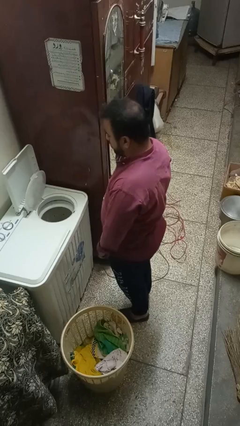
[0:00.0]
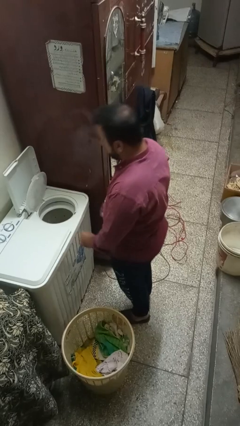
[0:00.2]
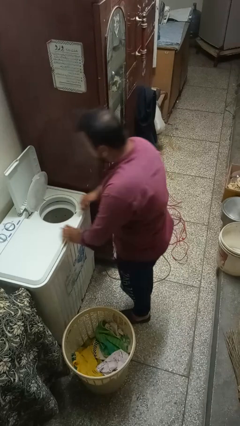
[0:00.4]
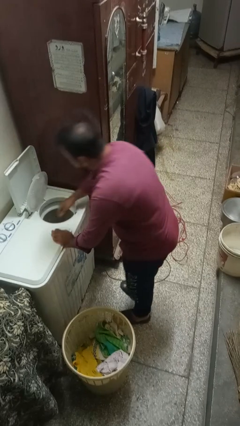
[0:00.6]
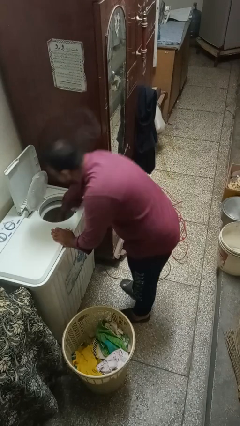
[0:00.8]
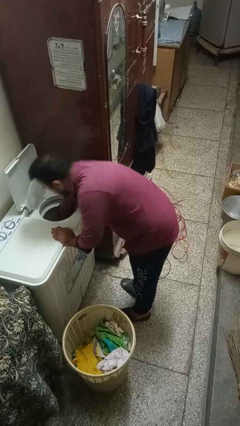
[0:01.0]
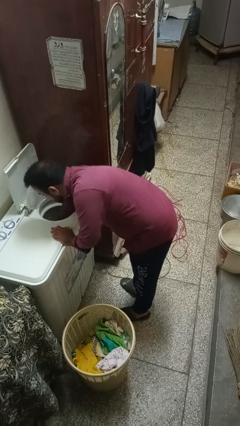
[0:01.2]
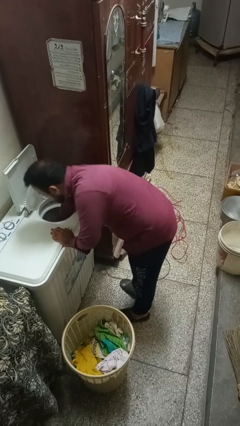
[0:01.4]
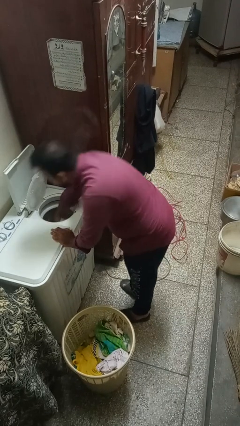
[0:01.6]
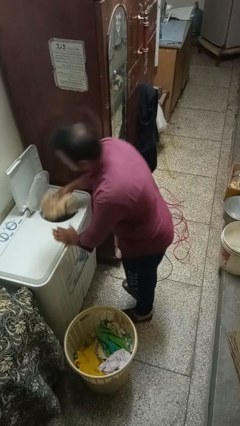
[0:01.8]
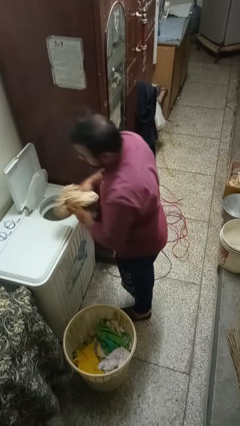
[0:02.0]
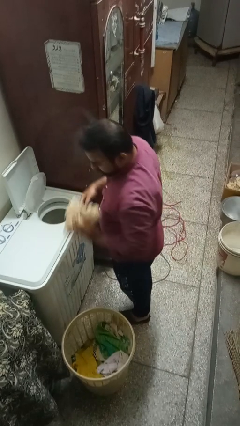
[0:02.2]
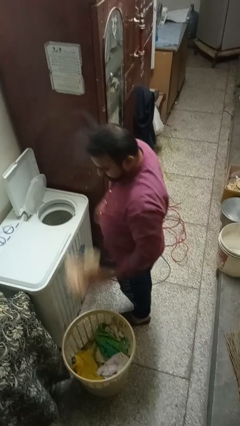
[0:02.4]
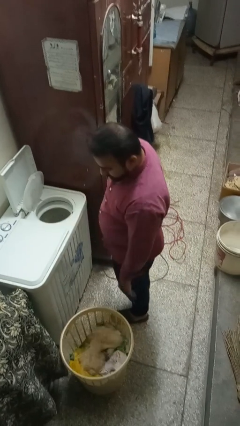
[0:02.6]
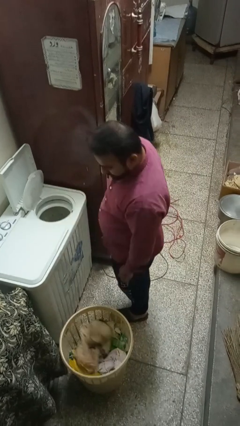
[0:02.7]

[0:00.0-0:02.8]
person unloads dryer

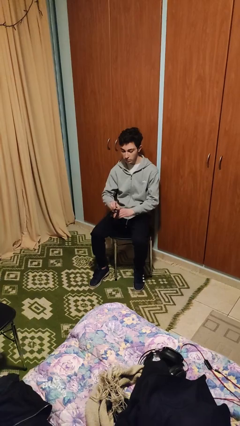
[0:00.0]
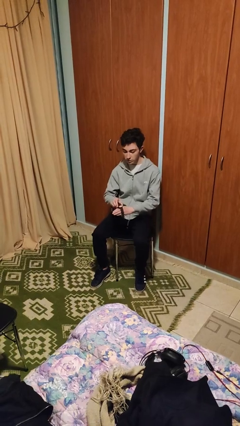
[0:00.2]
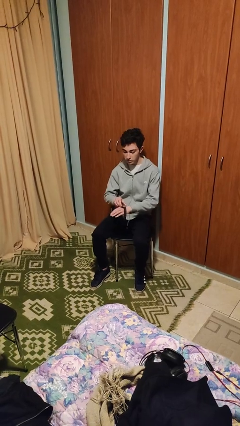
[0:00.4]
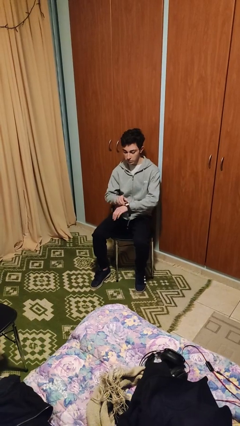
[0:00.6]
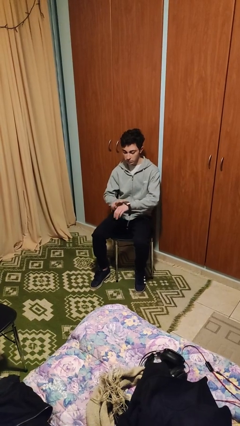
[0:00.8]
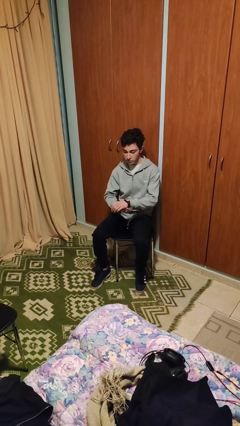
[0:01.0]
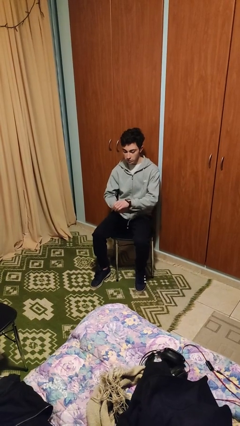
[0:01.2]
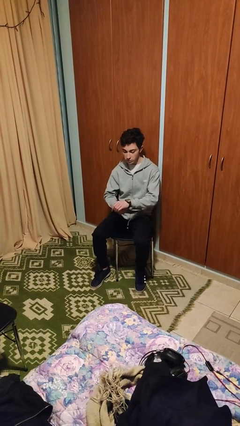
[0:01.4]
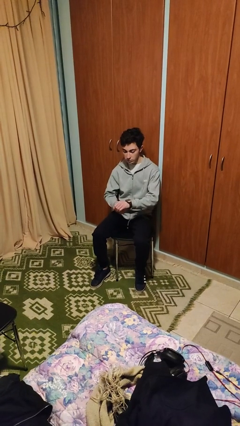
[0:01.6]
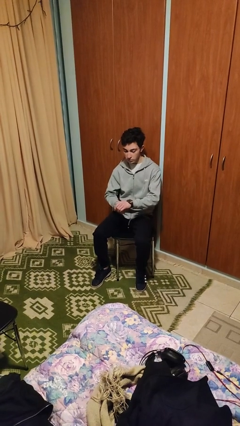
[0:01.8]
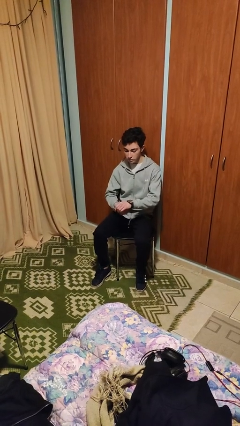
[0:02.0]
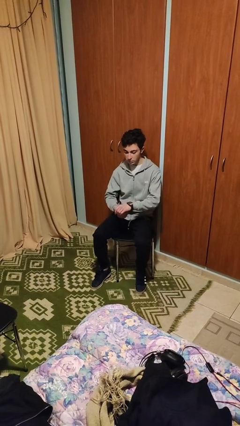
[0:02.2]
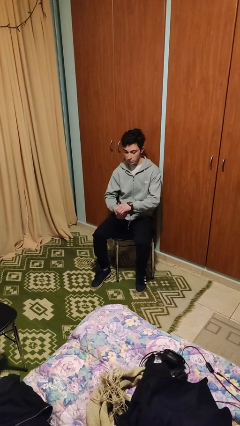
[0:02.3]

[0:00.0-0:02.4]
person puts on wristwatch

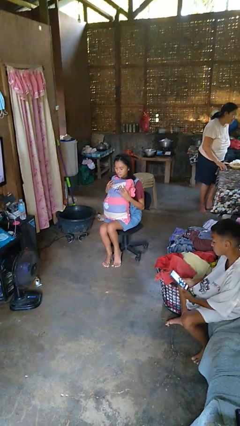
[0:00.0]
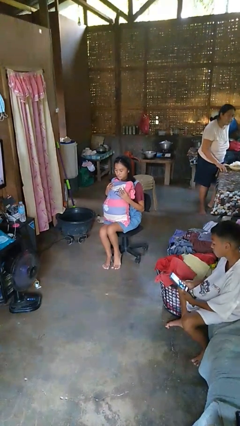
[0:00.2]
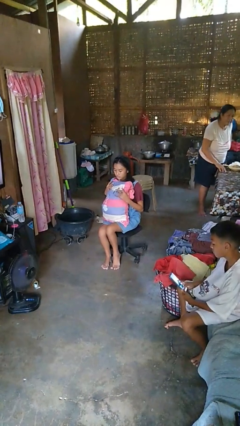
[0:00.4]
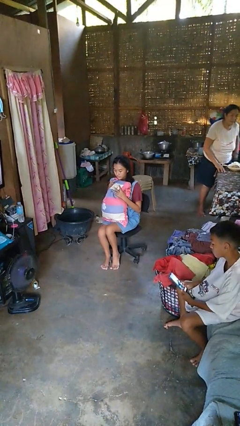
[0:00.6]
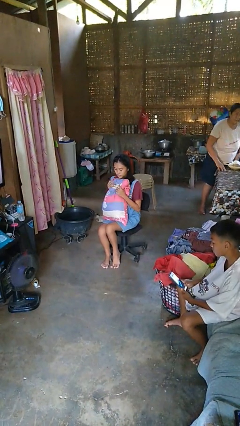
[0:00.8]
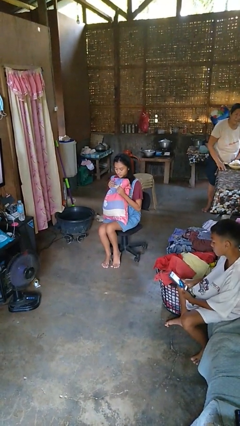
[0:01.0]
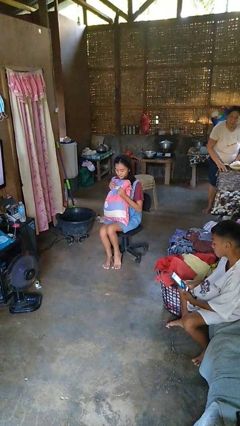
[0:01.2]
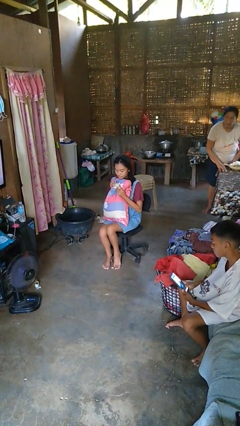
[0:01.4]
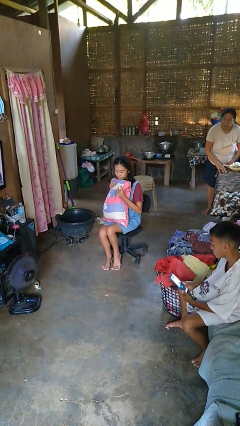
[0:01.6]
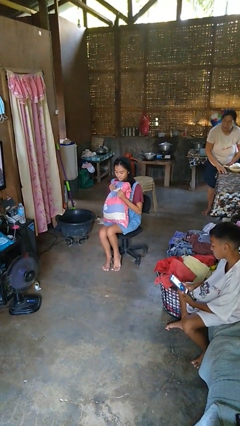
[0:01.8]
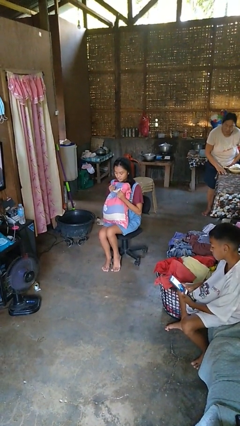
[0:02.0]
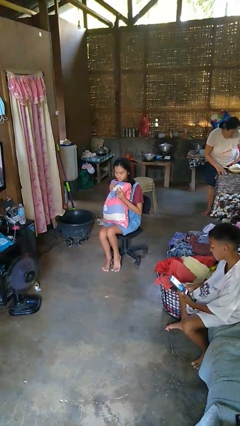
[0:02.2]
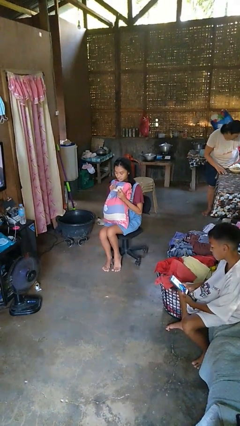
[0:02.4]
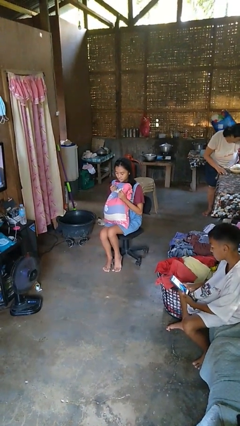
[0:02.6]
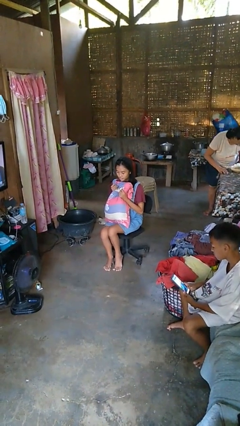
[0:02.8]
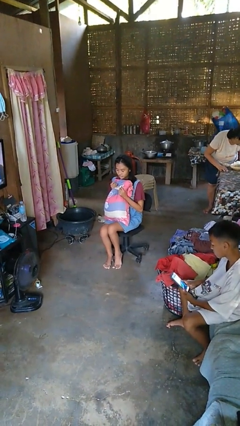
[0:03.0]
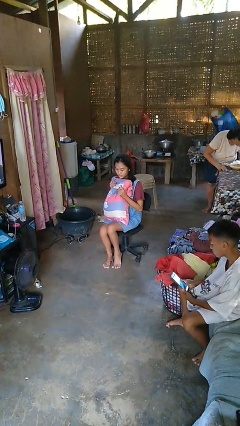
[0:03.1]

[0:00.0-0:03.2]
person squeezes object

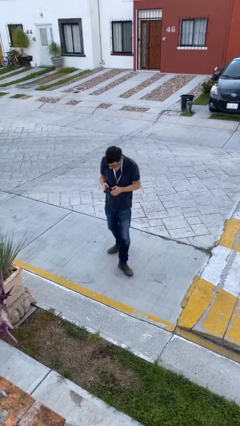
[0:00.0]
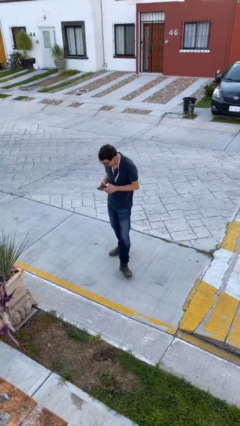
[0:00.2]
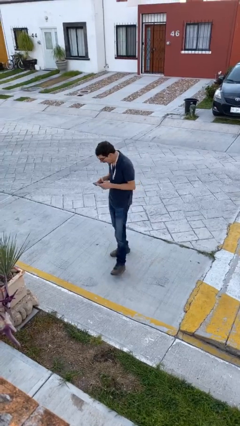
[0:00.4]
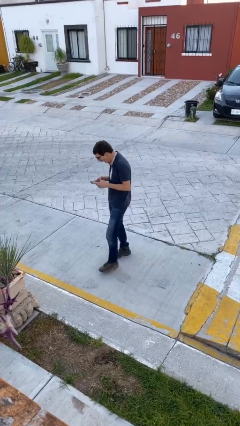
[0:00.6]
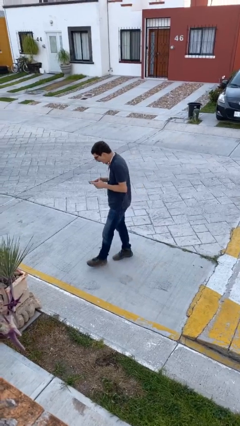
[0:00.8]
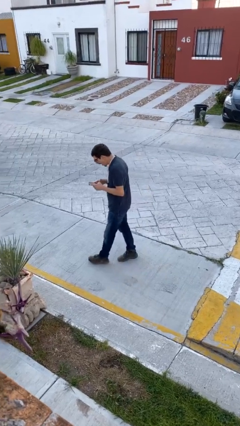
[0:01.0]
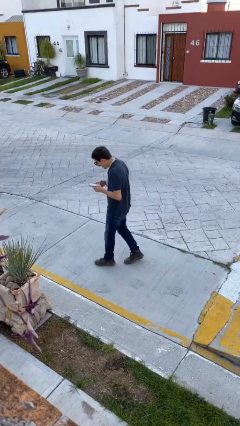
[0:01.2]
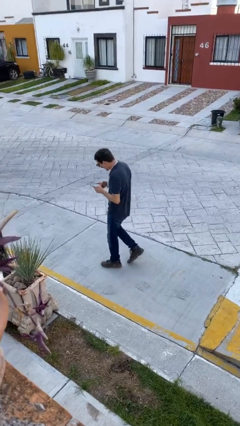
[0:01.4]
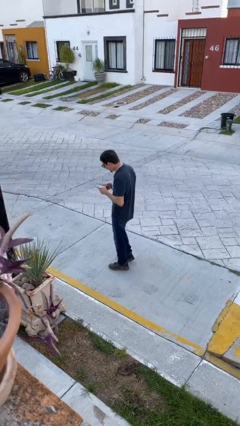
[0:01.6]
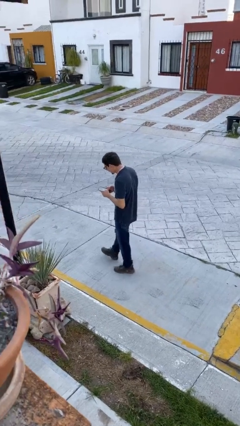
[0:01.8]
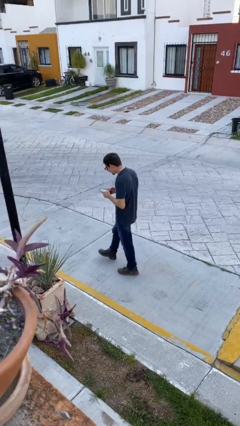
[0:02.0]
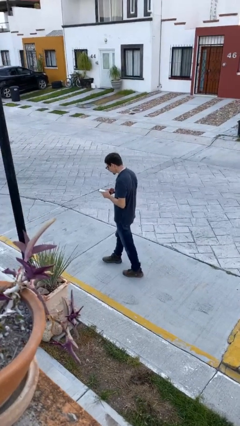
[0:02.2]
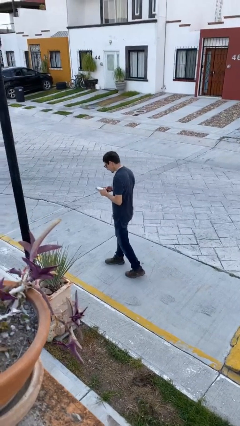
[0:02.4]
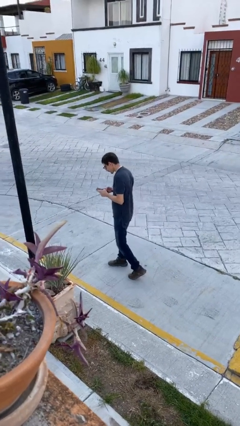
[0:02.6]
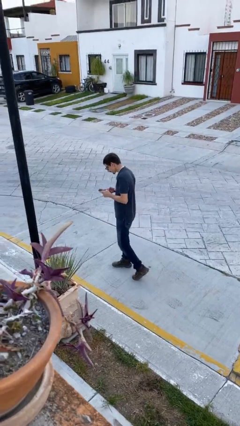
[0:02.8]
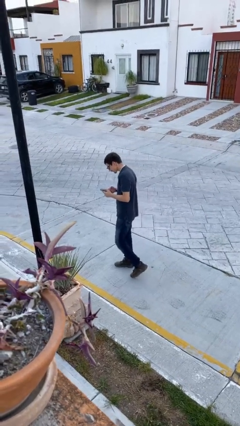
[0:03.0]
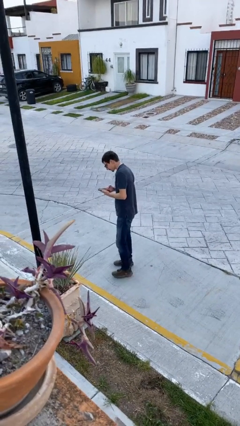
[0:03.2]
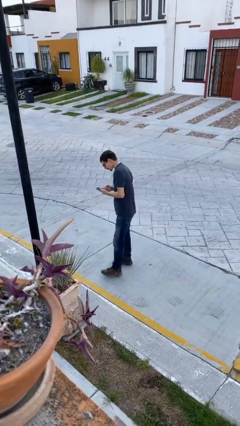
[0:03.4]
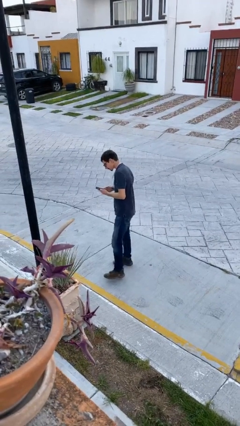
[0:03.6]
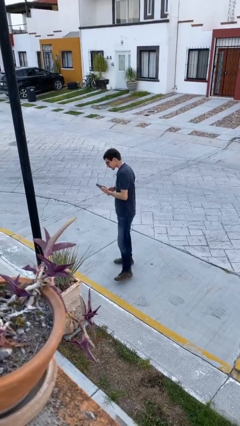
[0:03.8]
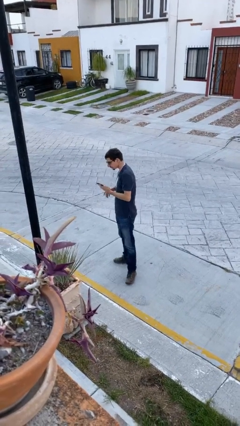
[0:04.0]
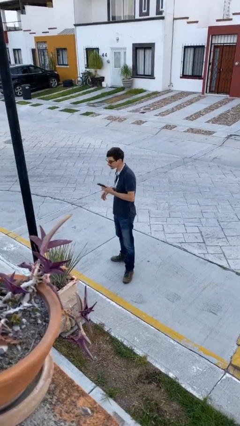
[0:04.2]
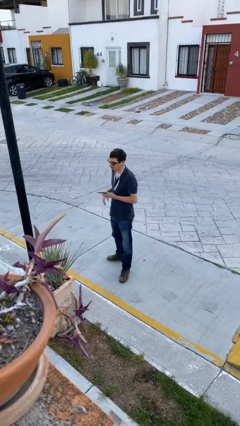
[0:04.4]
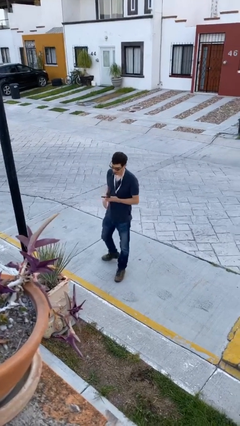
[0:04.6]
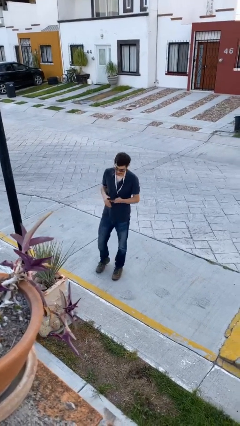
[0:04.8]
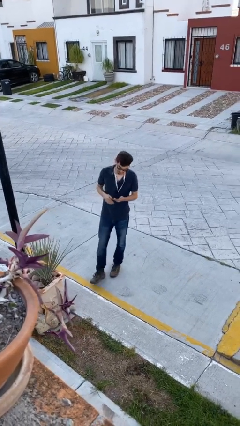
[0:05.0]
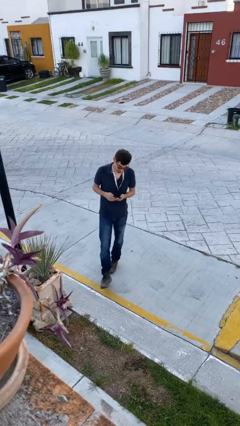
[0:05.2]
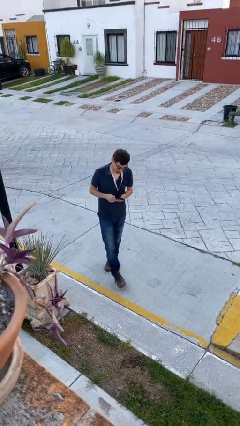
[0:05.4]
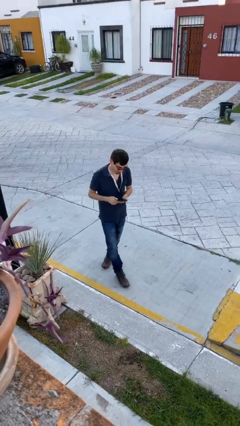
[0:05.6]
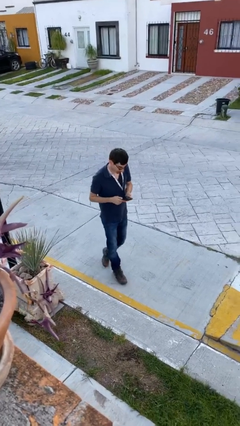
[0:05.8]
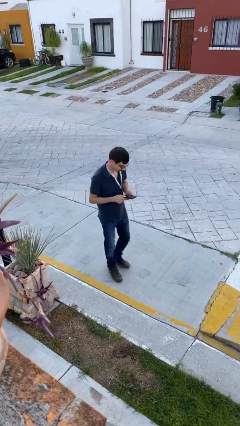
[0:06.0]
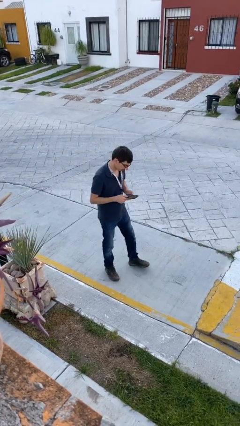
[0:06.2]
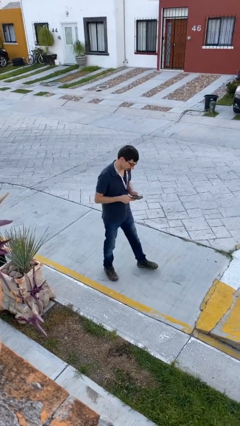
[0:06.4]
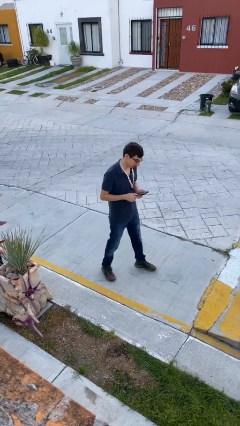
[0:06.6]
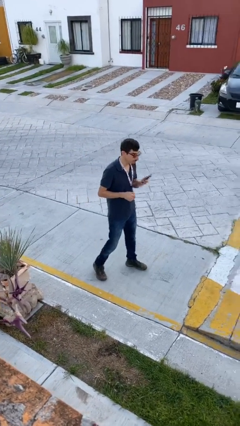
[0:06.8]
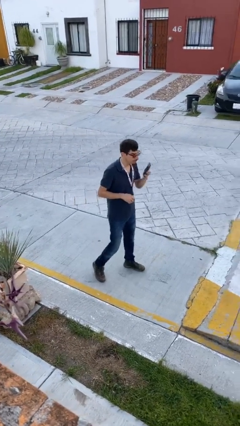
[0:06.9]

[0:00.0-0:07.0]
person texts on phone

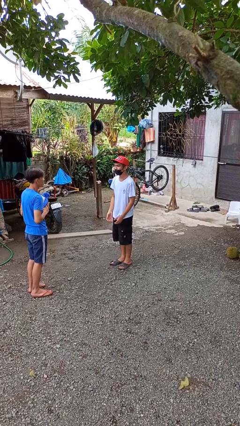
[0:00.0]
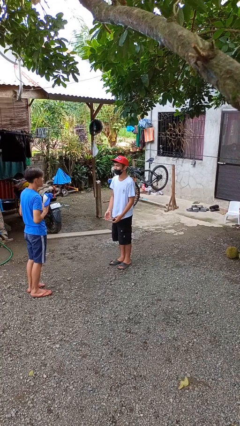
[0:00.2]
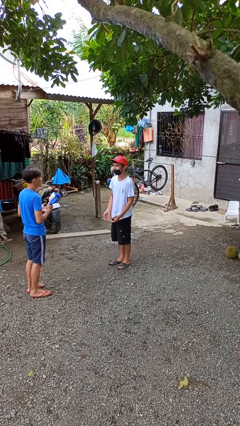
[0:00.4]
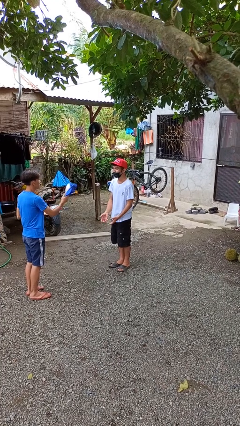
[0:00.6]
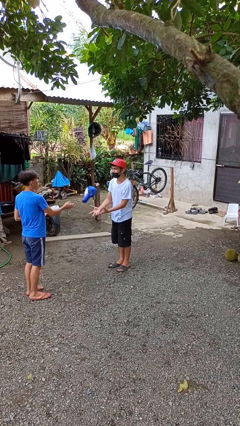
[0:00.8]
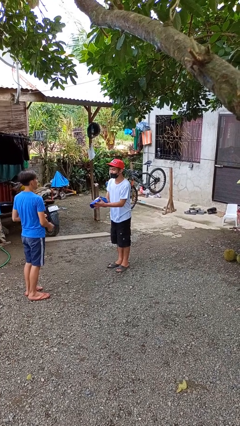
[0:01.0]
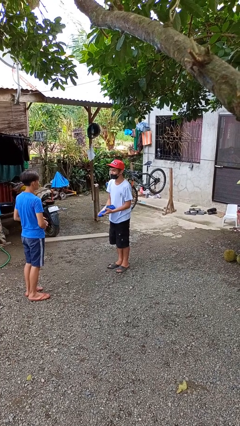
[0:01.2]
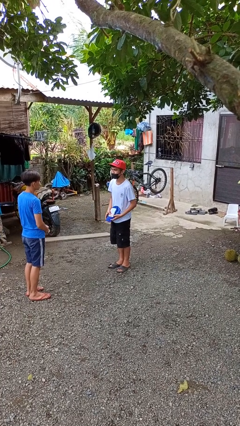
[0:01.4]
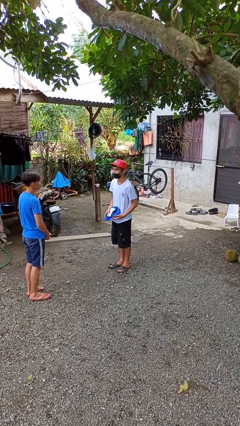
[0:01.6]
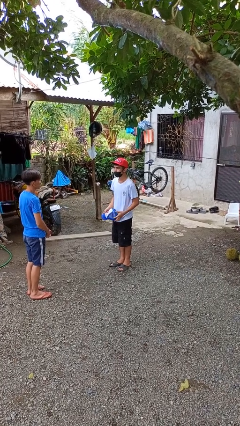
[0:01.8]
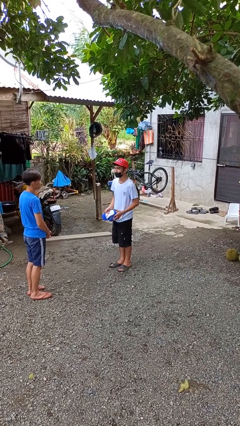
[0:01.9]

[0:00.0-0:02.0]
person catches object from person
